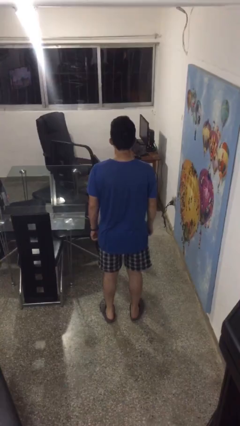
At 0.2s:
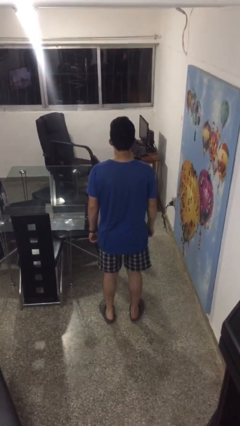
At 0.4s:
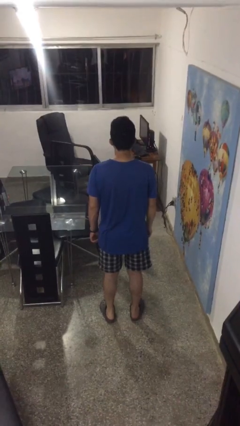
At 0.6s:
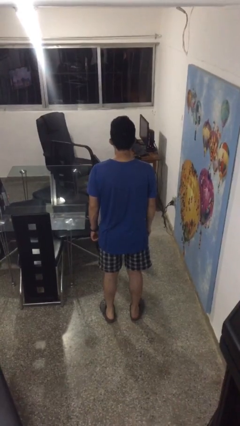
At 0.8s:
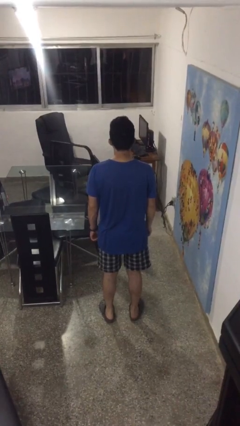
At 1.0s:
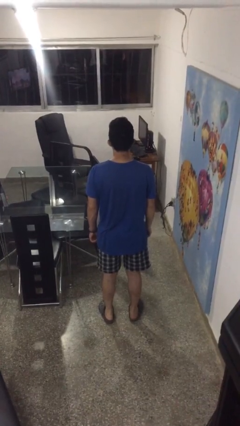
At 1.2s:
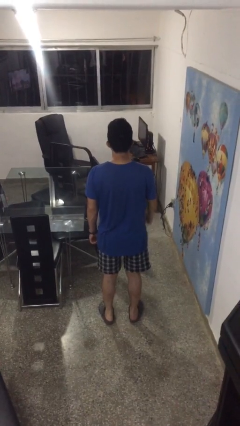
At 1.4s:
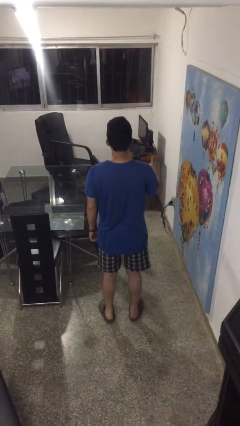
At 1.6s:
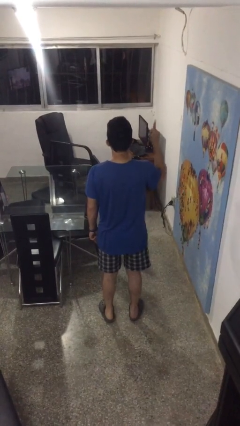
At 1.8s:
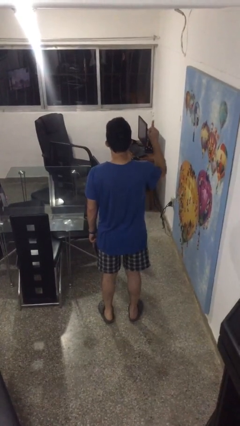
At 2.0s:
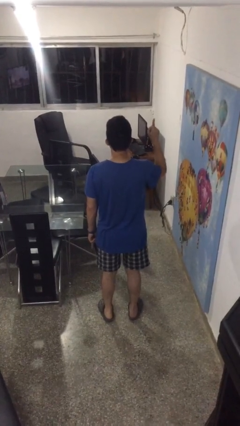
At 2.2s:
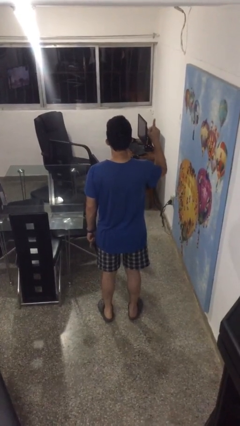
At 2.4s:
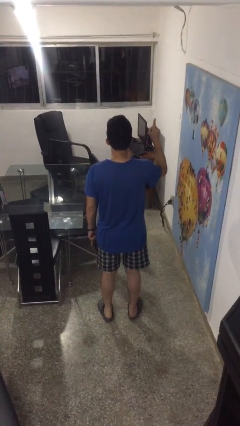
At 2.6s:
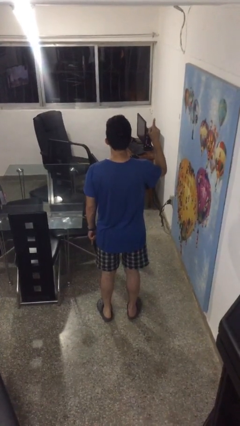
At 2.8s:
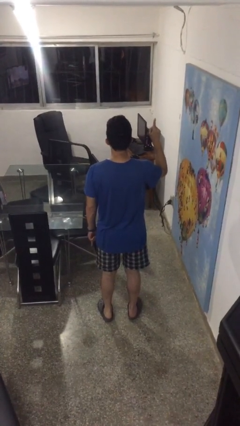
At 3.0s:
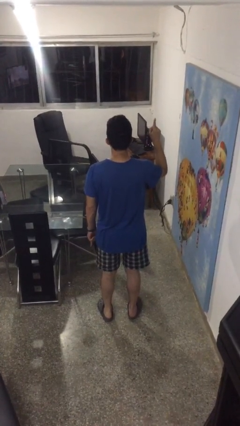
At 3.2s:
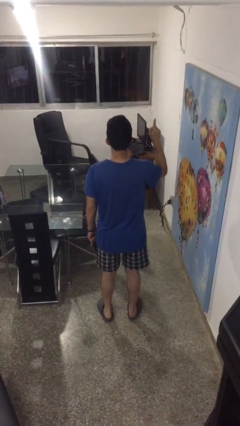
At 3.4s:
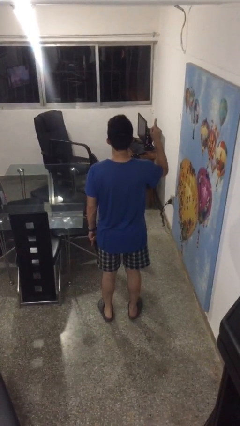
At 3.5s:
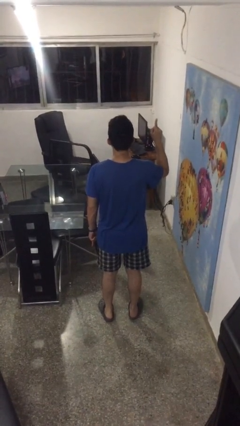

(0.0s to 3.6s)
person gestures number one

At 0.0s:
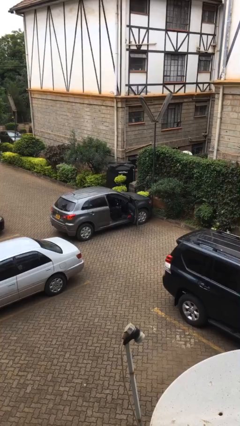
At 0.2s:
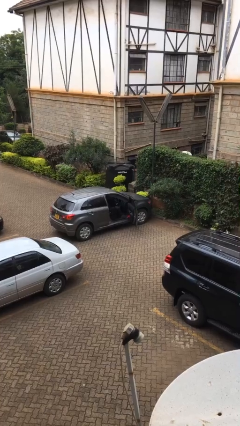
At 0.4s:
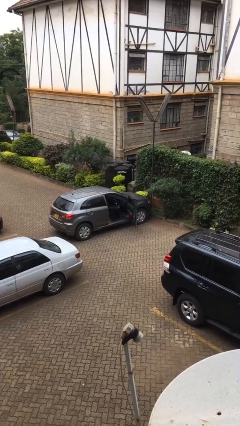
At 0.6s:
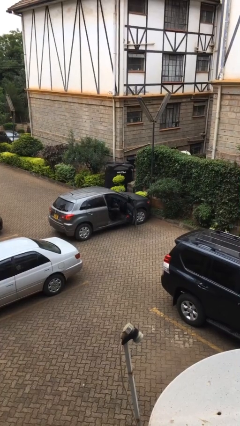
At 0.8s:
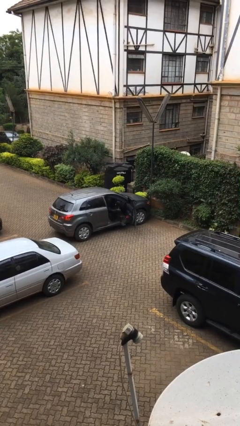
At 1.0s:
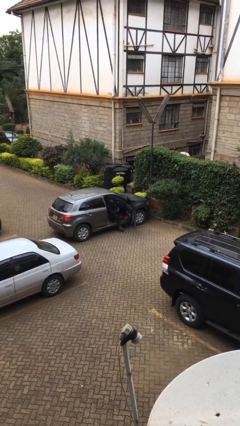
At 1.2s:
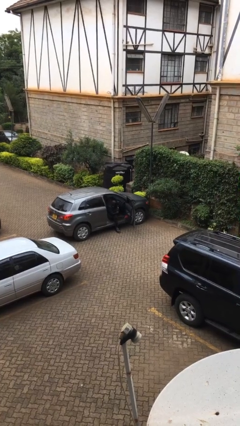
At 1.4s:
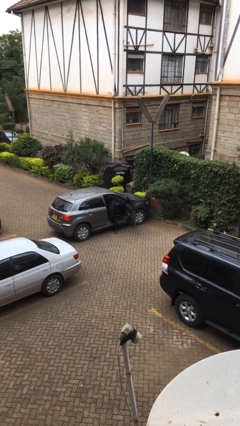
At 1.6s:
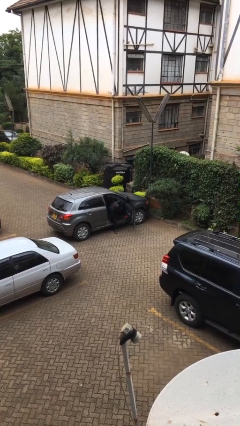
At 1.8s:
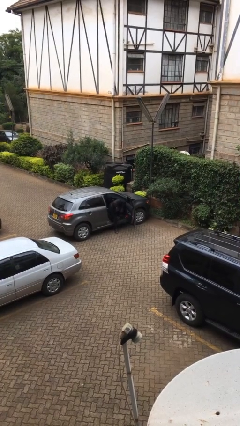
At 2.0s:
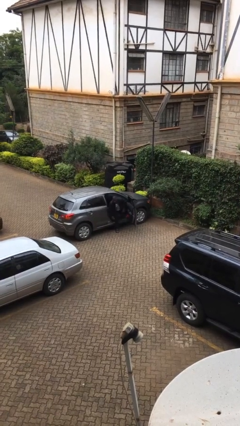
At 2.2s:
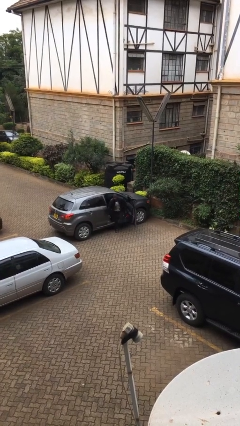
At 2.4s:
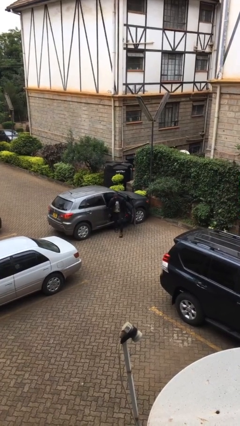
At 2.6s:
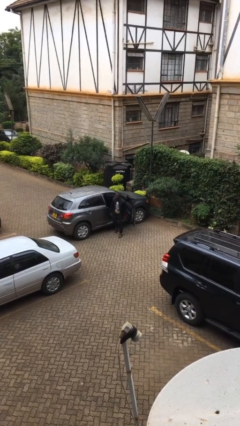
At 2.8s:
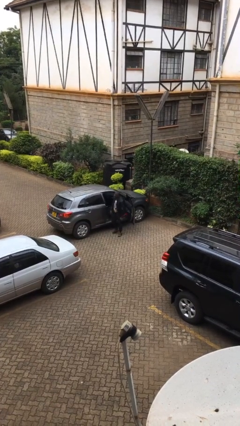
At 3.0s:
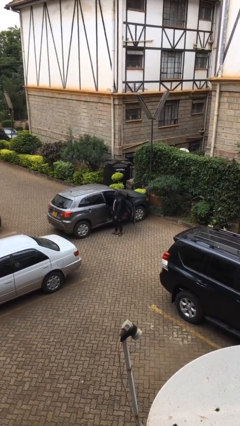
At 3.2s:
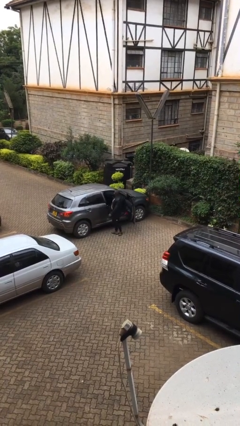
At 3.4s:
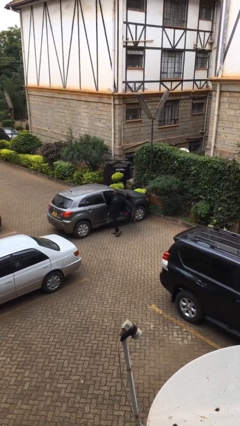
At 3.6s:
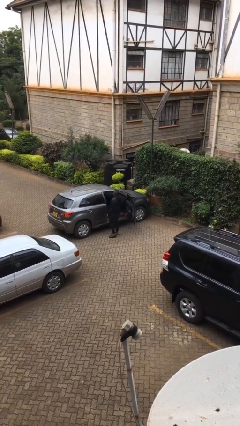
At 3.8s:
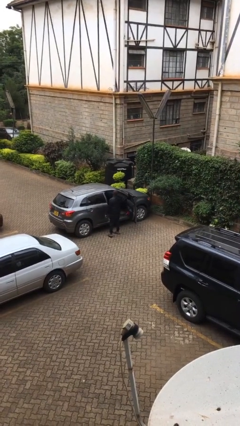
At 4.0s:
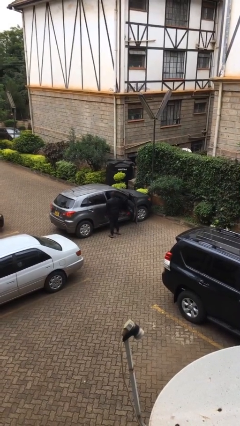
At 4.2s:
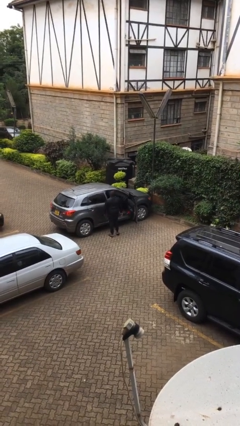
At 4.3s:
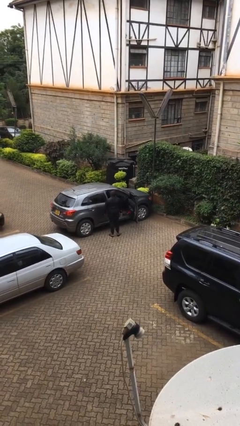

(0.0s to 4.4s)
person exits car

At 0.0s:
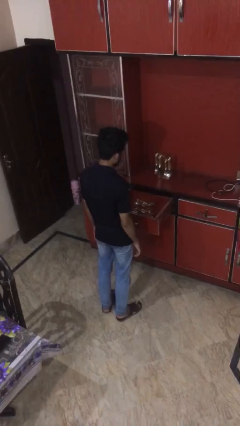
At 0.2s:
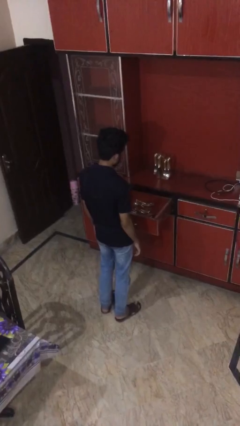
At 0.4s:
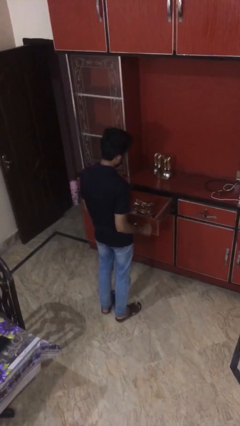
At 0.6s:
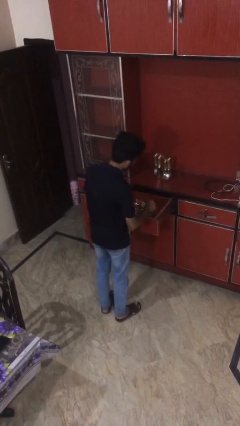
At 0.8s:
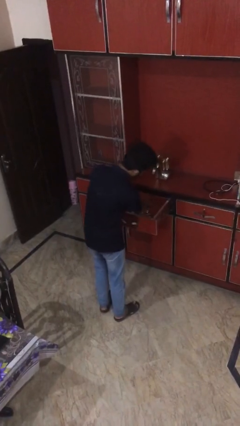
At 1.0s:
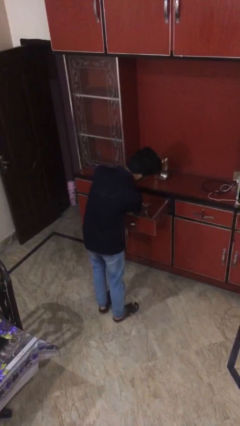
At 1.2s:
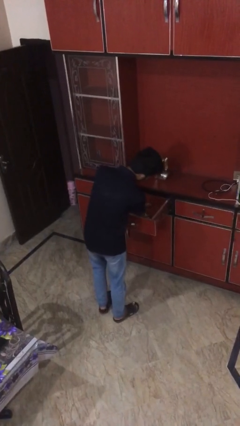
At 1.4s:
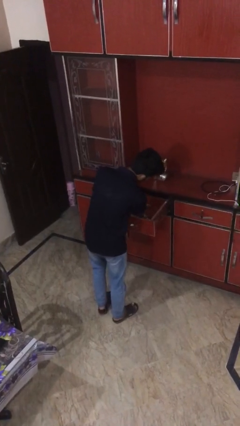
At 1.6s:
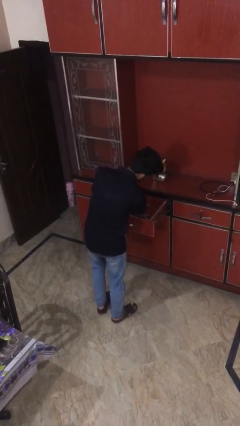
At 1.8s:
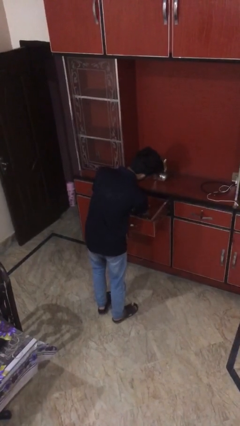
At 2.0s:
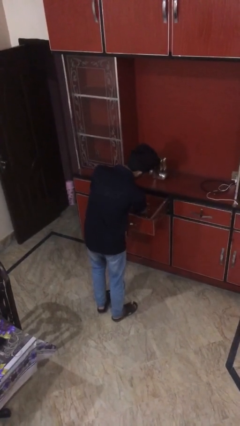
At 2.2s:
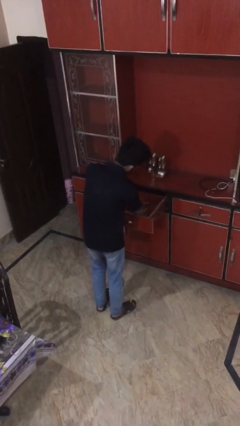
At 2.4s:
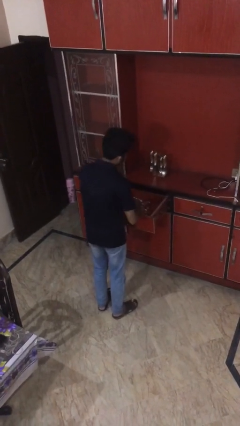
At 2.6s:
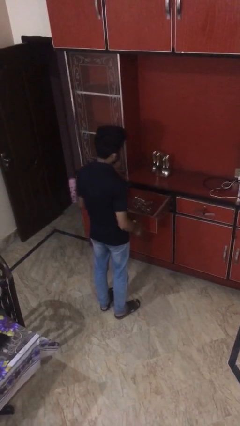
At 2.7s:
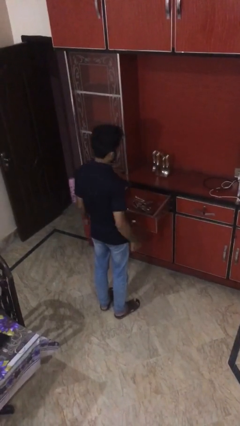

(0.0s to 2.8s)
person searches in kitchen drawer

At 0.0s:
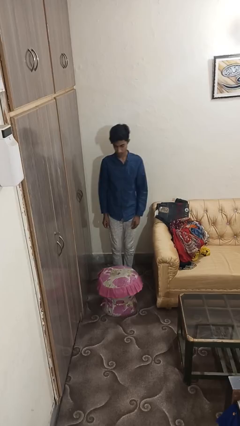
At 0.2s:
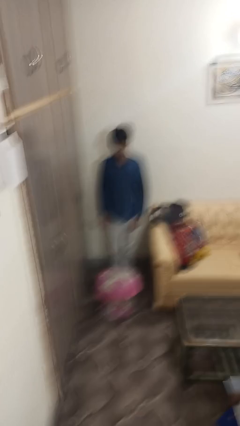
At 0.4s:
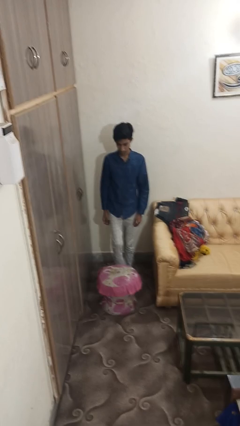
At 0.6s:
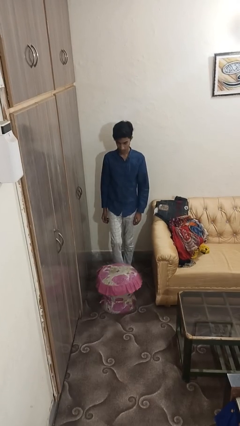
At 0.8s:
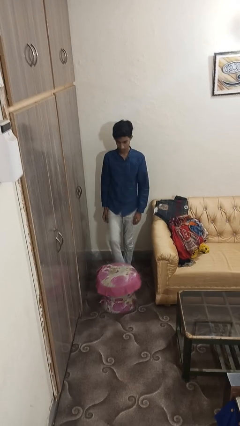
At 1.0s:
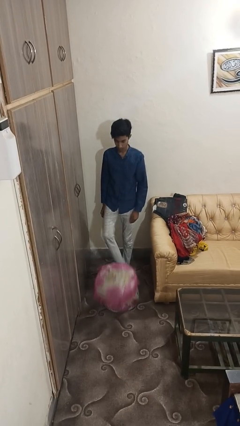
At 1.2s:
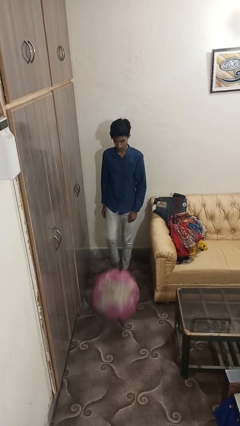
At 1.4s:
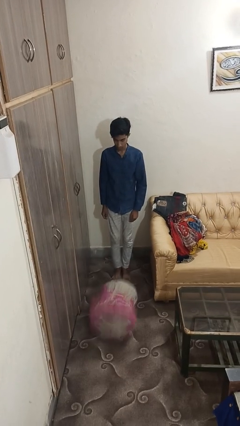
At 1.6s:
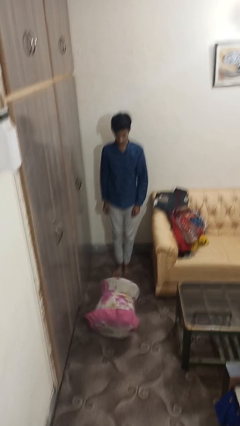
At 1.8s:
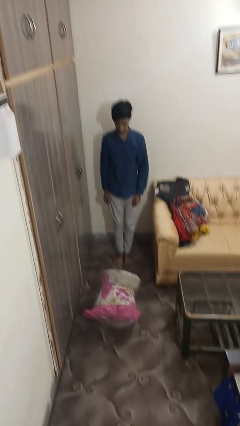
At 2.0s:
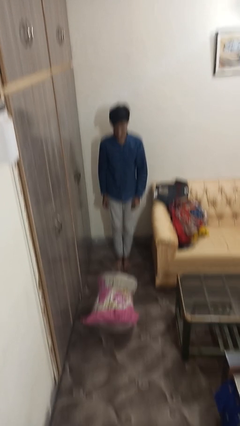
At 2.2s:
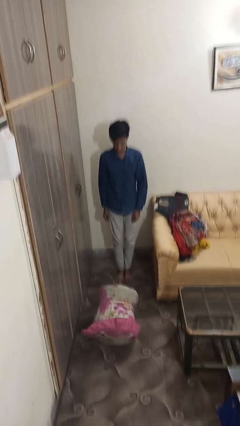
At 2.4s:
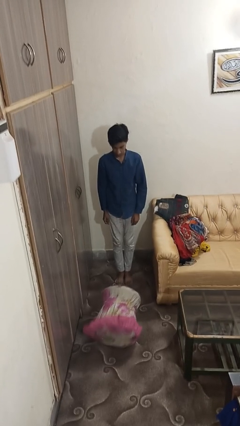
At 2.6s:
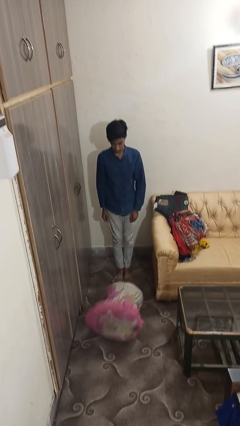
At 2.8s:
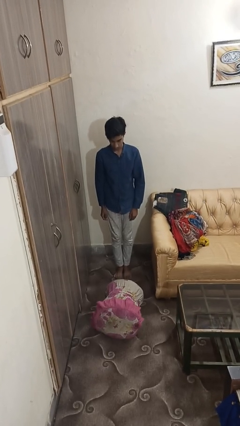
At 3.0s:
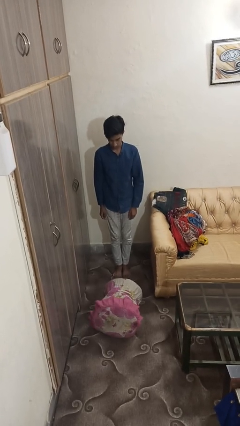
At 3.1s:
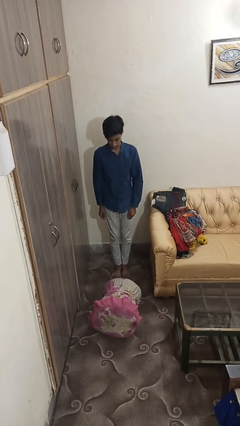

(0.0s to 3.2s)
person knocks over furniture

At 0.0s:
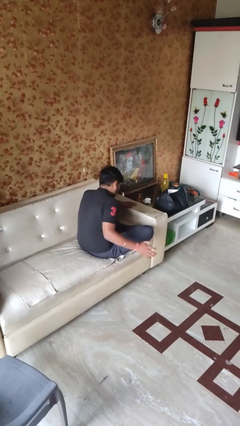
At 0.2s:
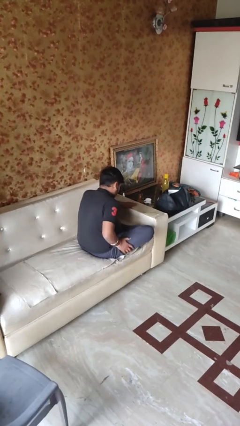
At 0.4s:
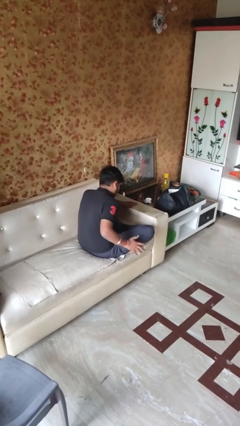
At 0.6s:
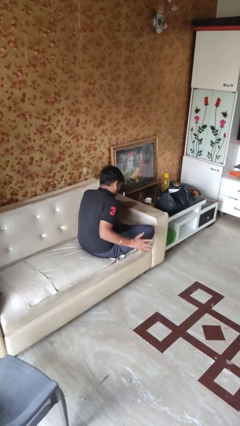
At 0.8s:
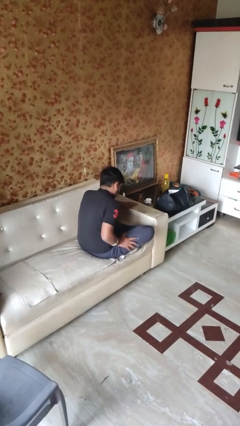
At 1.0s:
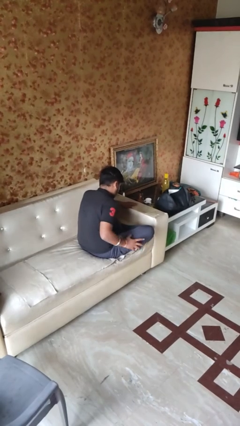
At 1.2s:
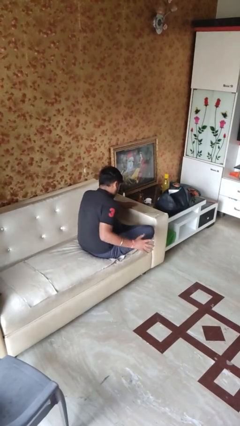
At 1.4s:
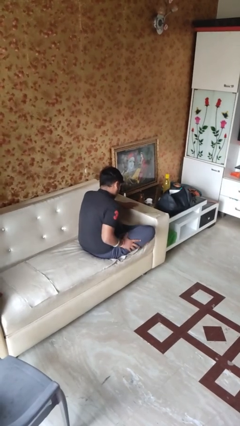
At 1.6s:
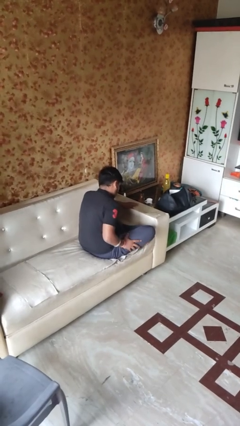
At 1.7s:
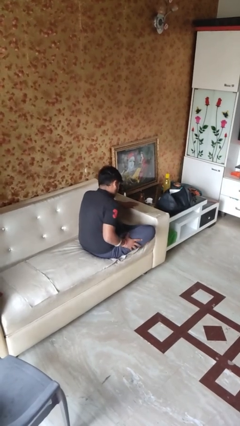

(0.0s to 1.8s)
person slaps hands on thighs

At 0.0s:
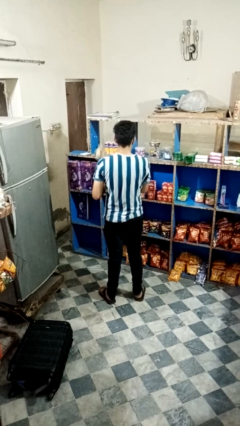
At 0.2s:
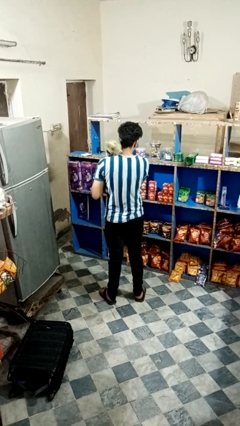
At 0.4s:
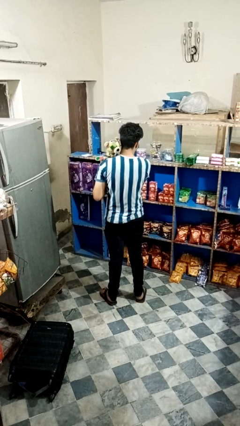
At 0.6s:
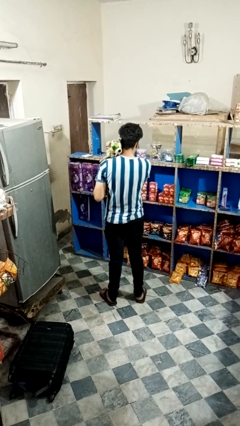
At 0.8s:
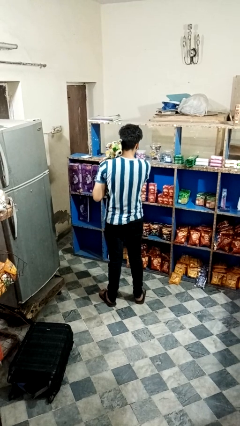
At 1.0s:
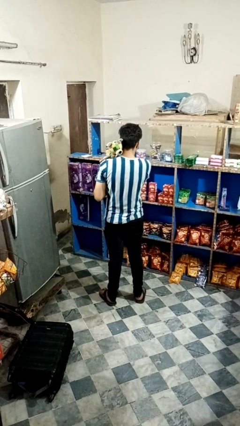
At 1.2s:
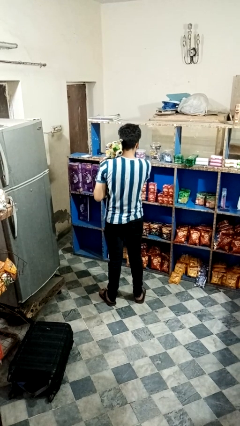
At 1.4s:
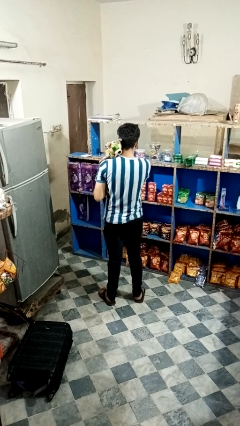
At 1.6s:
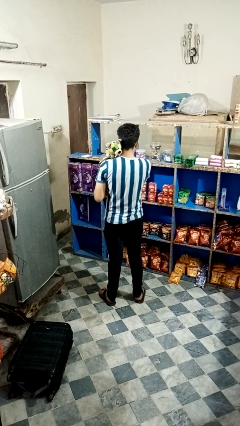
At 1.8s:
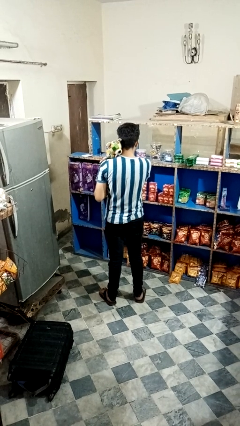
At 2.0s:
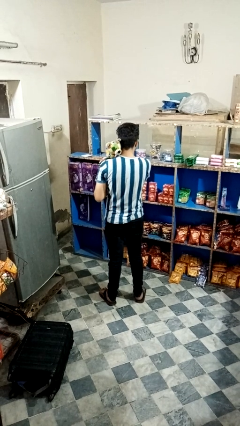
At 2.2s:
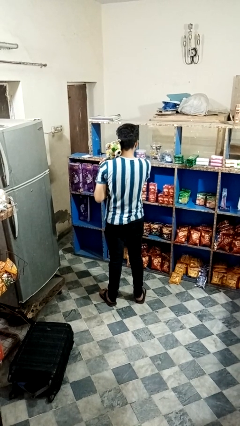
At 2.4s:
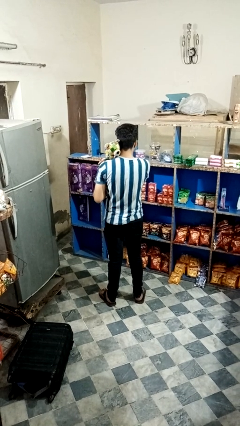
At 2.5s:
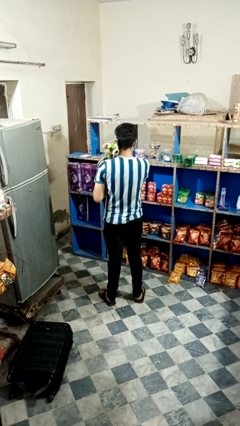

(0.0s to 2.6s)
person hugs stuffed animal
